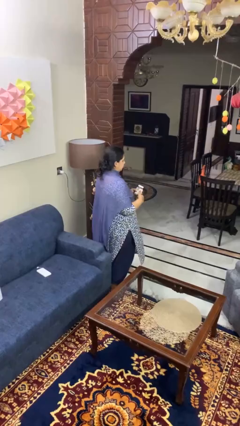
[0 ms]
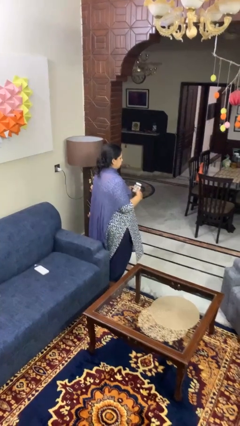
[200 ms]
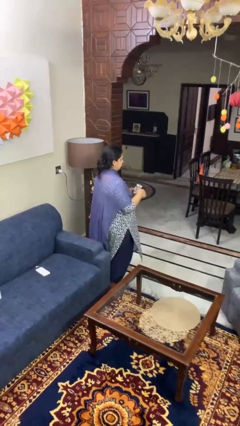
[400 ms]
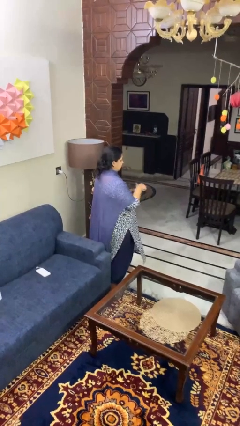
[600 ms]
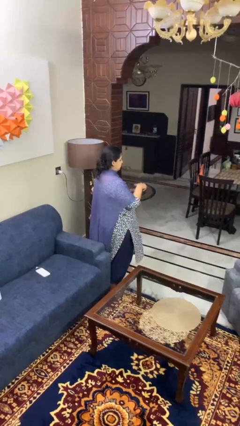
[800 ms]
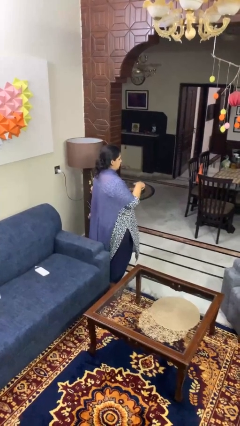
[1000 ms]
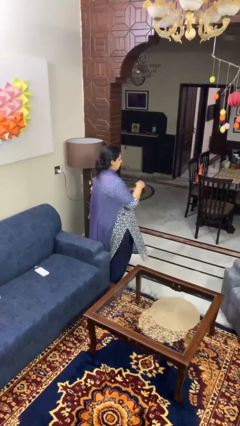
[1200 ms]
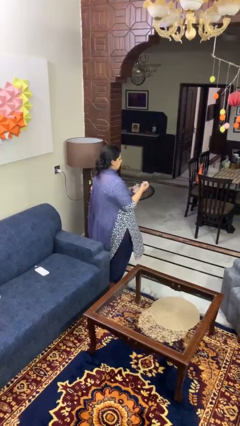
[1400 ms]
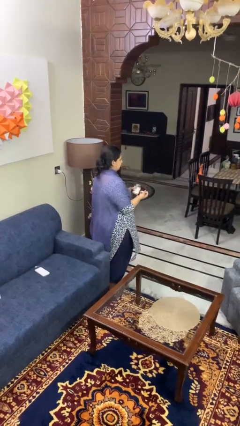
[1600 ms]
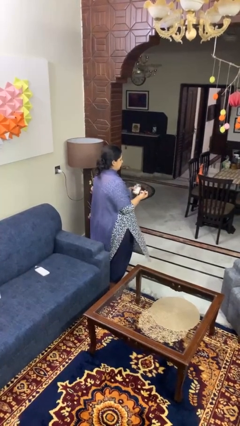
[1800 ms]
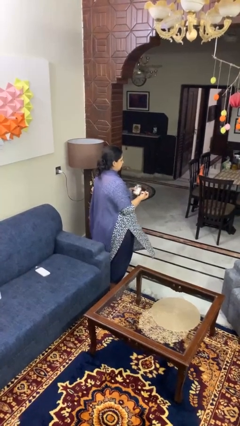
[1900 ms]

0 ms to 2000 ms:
person opens jar

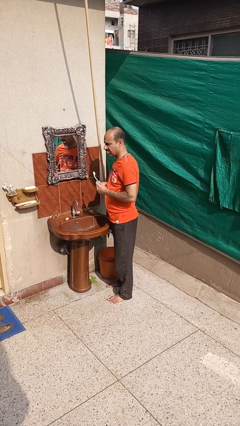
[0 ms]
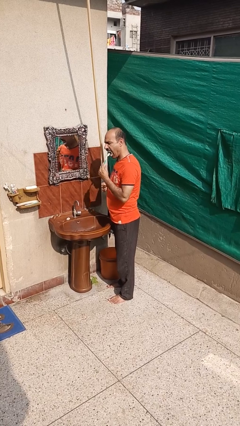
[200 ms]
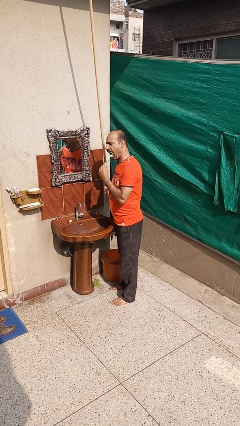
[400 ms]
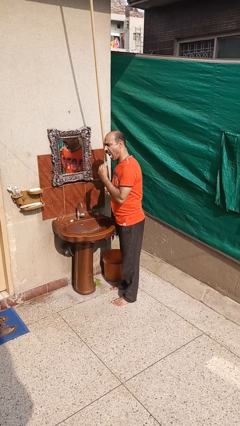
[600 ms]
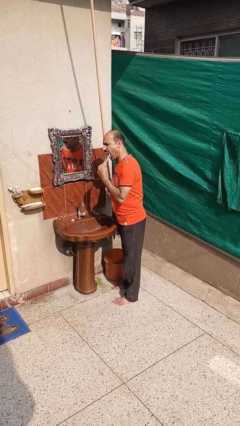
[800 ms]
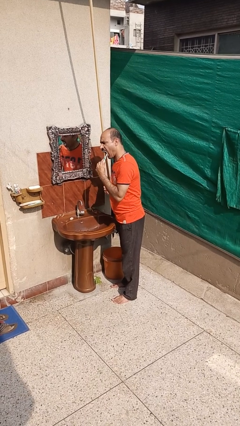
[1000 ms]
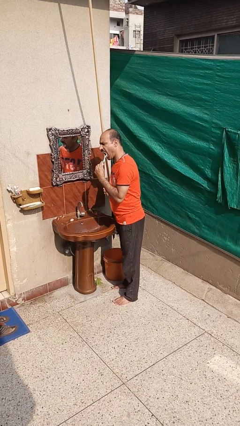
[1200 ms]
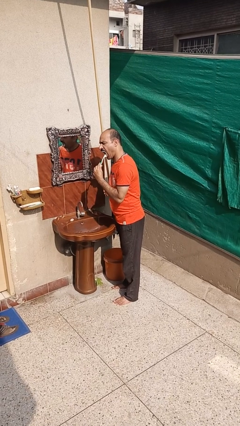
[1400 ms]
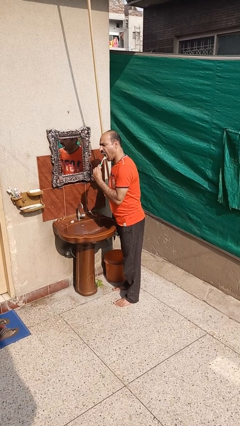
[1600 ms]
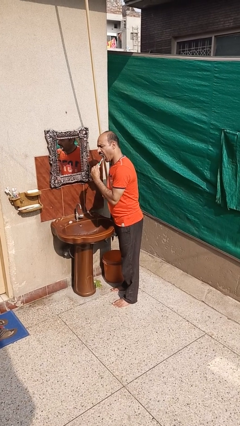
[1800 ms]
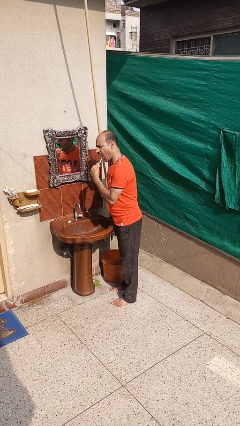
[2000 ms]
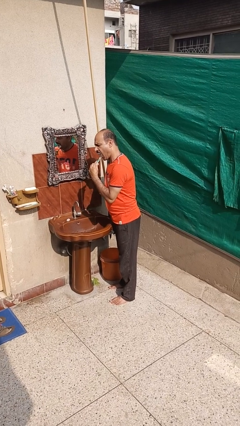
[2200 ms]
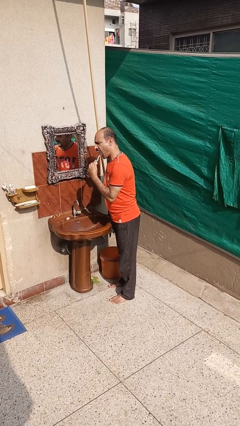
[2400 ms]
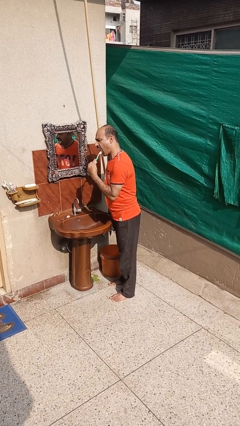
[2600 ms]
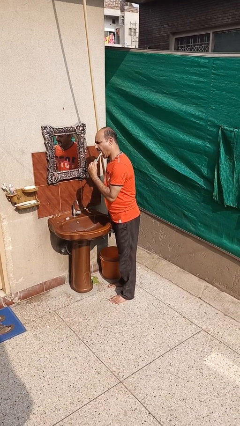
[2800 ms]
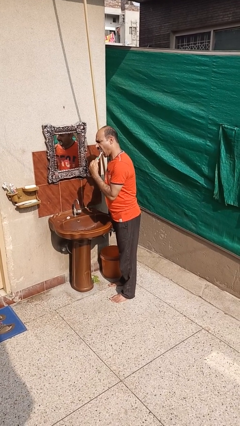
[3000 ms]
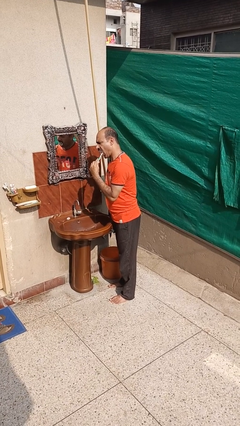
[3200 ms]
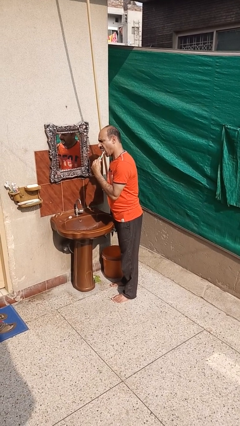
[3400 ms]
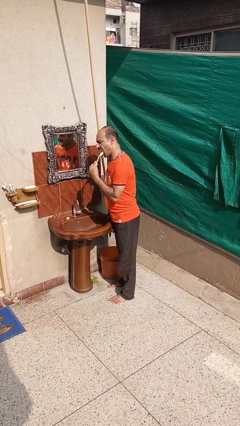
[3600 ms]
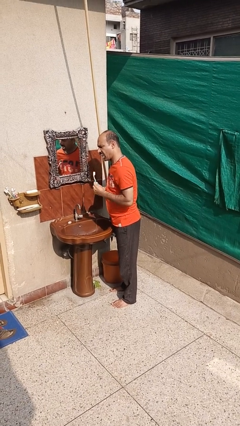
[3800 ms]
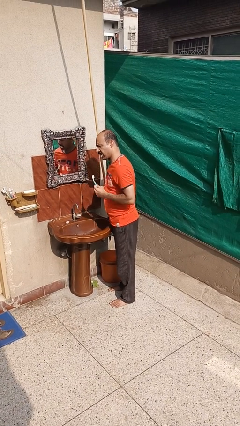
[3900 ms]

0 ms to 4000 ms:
person brushes teeth

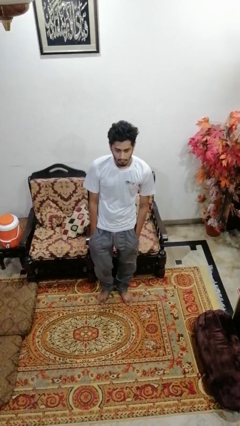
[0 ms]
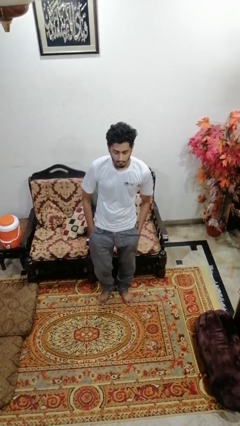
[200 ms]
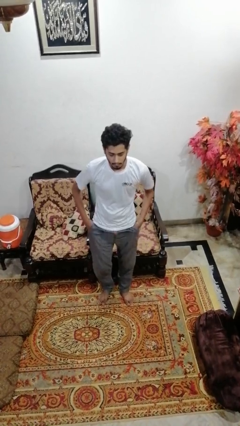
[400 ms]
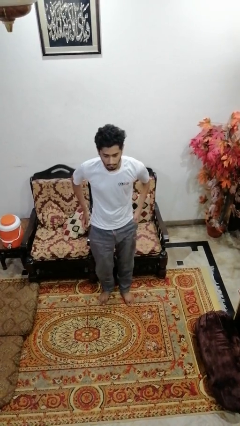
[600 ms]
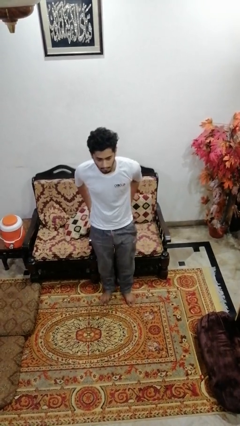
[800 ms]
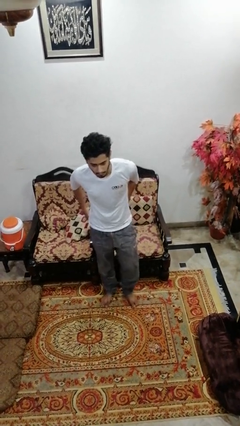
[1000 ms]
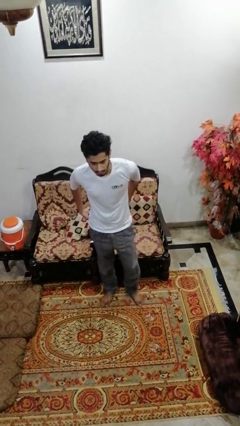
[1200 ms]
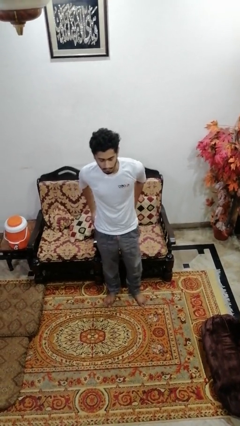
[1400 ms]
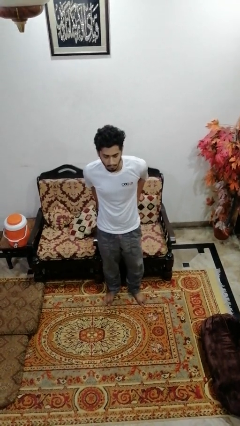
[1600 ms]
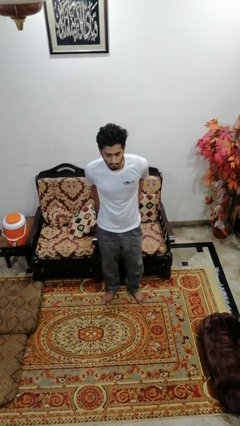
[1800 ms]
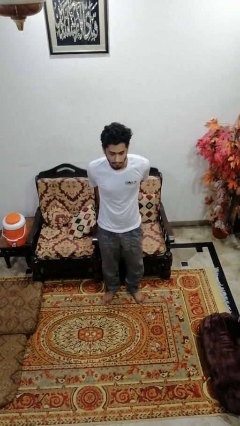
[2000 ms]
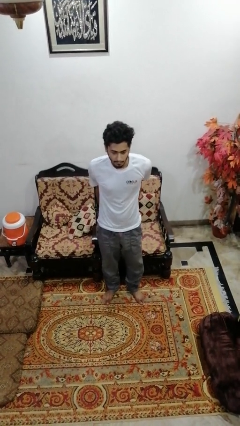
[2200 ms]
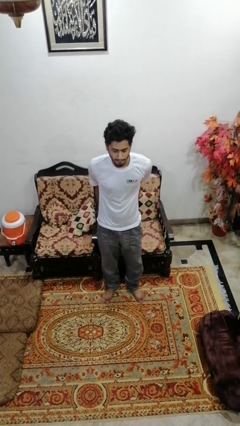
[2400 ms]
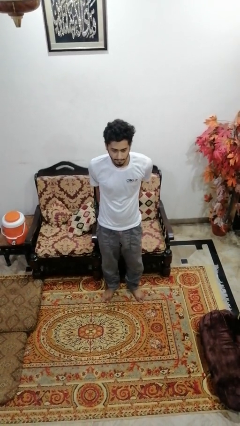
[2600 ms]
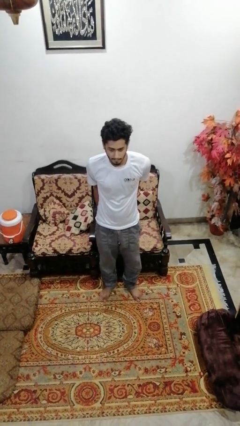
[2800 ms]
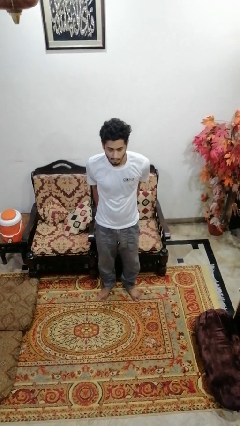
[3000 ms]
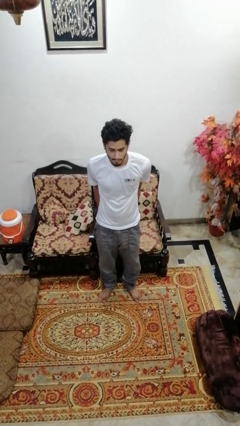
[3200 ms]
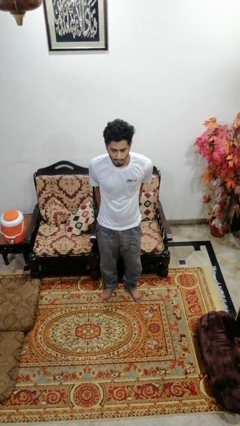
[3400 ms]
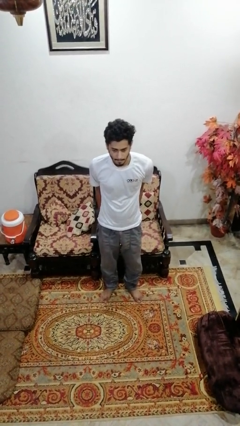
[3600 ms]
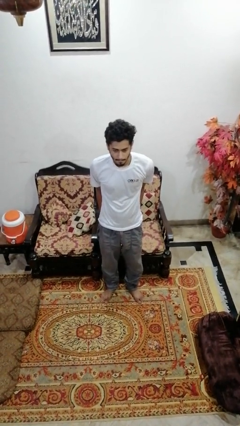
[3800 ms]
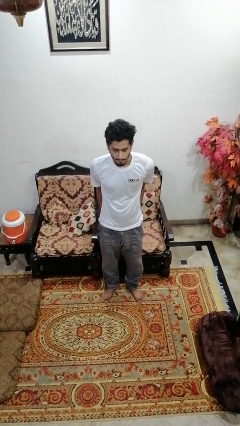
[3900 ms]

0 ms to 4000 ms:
person puts hands in back pockets

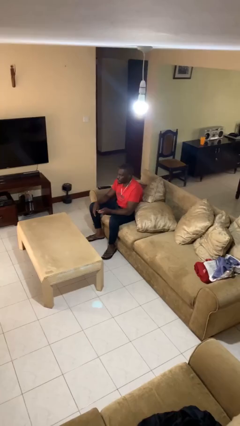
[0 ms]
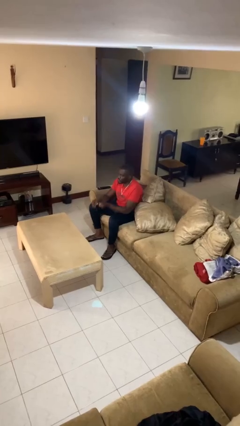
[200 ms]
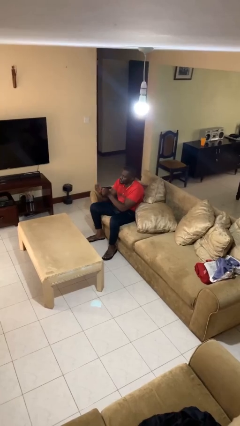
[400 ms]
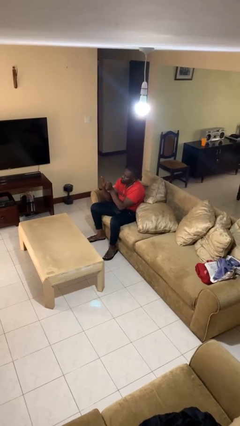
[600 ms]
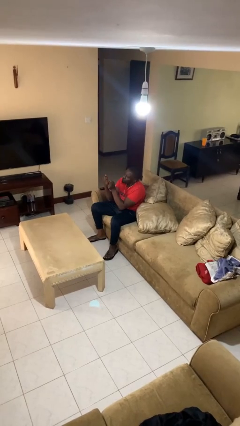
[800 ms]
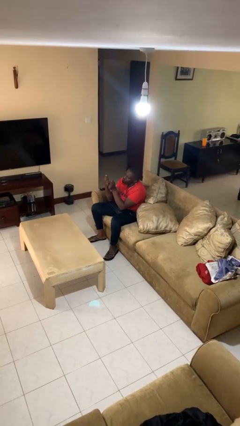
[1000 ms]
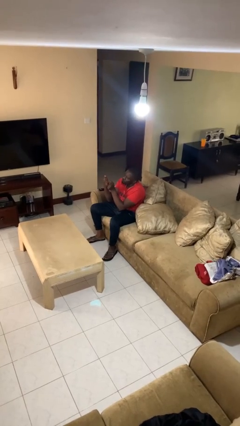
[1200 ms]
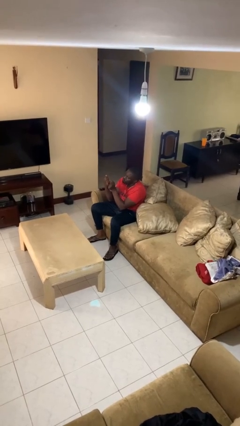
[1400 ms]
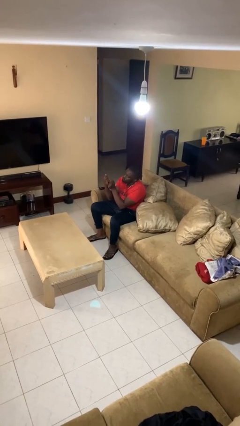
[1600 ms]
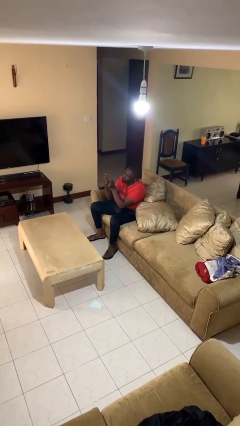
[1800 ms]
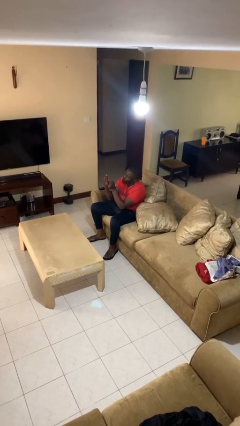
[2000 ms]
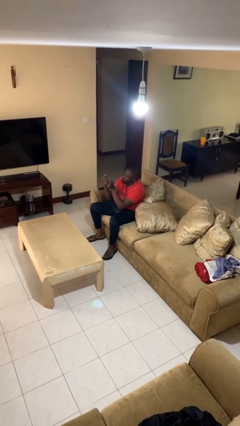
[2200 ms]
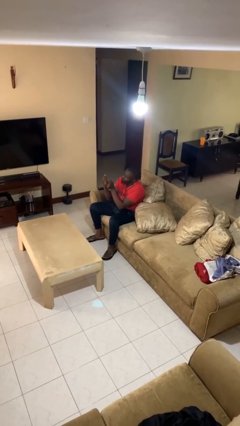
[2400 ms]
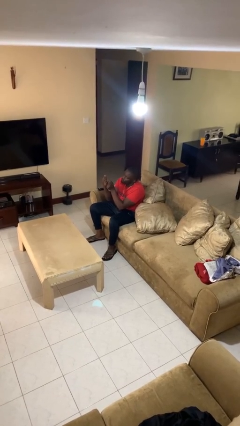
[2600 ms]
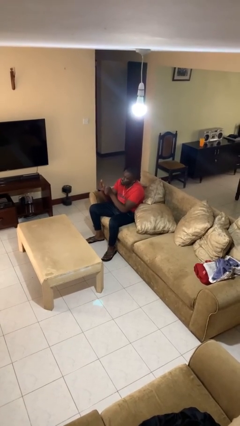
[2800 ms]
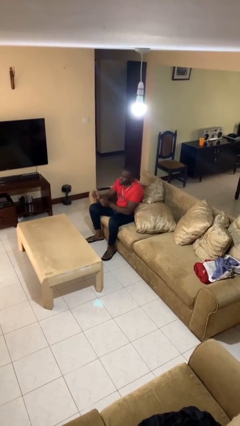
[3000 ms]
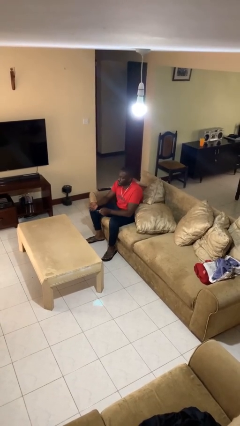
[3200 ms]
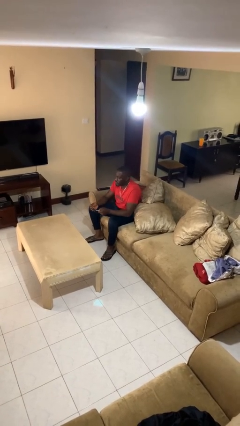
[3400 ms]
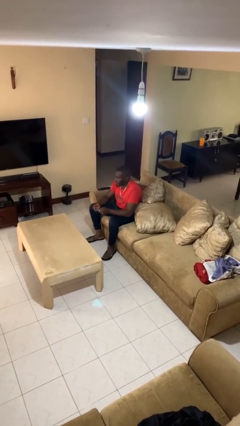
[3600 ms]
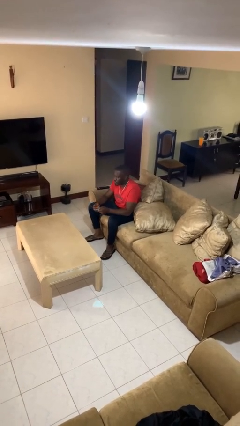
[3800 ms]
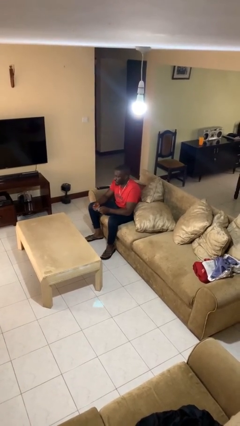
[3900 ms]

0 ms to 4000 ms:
person clips fingernails

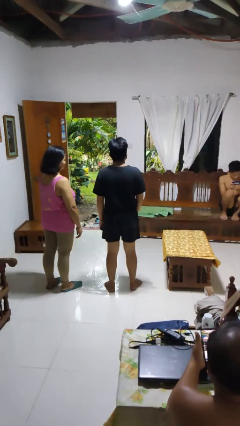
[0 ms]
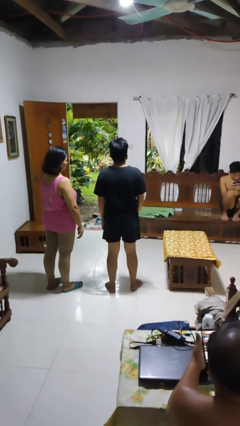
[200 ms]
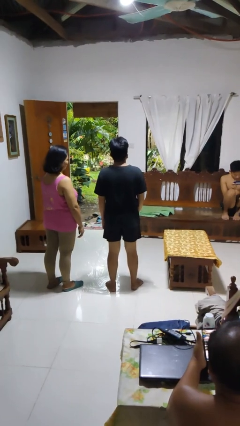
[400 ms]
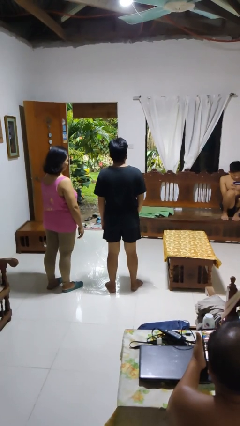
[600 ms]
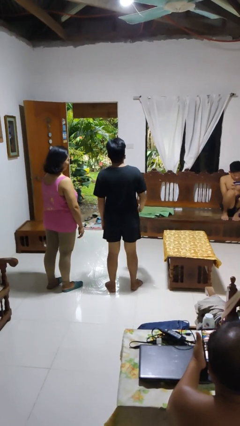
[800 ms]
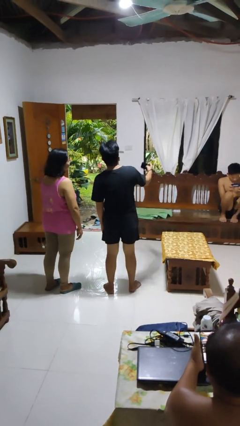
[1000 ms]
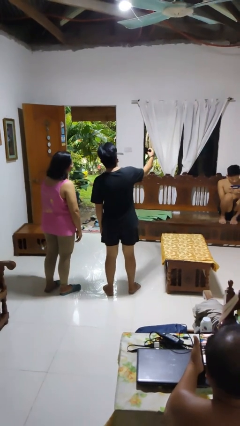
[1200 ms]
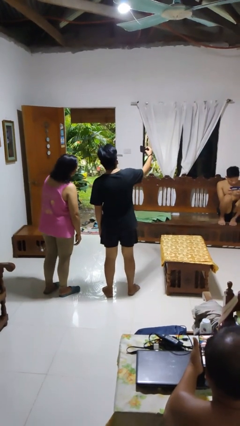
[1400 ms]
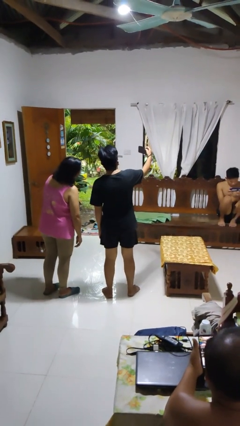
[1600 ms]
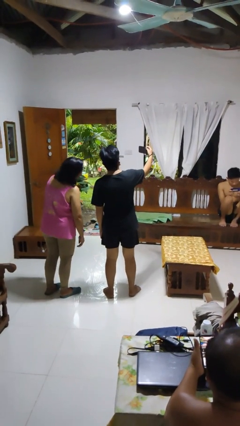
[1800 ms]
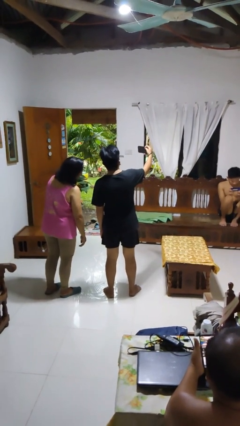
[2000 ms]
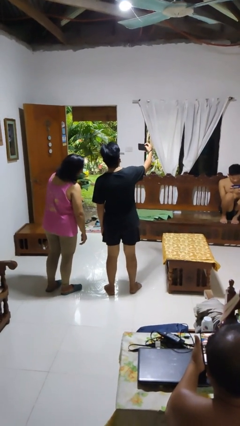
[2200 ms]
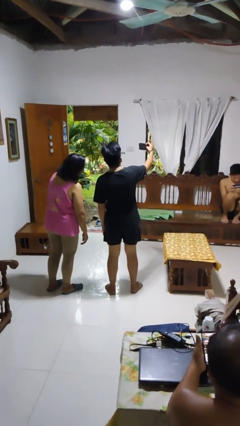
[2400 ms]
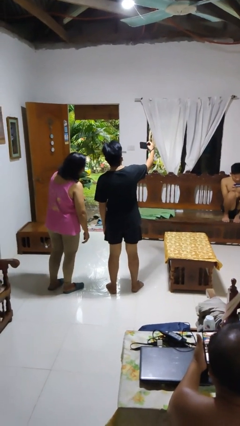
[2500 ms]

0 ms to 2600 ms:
person takes selfie with person

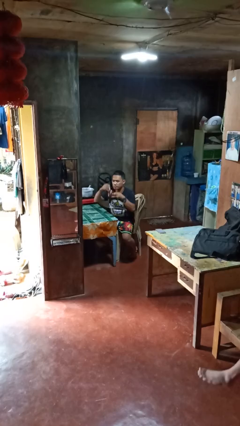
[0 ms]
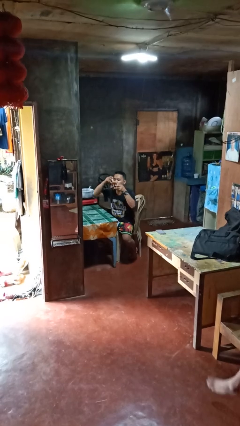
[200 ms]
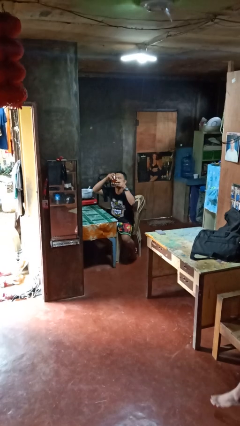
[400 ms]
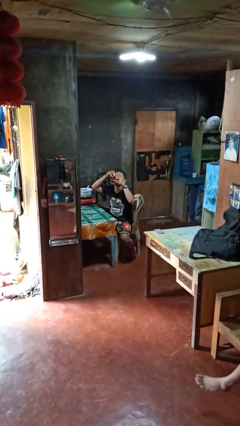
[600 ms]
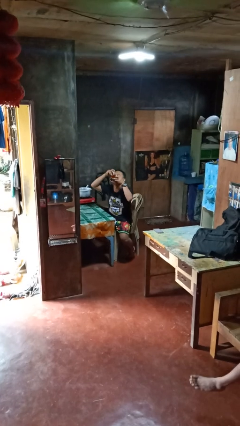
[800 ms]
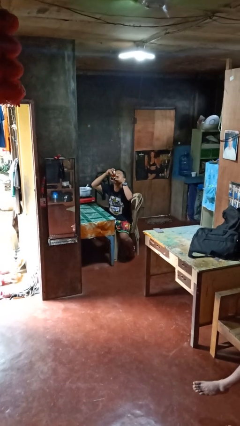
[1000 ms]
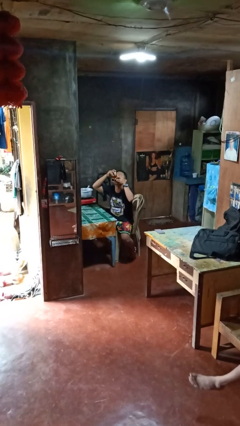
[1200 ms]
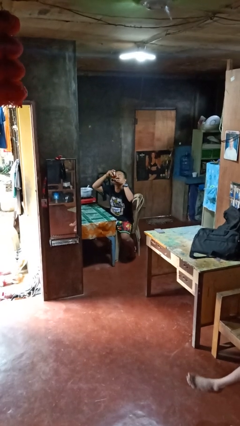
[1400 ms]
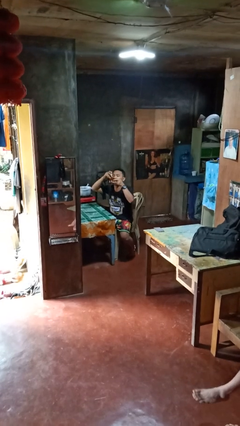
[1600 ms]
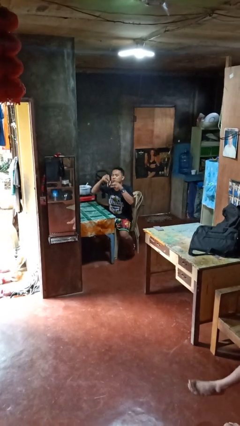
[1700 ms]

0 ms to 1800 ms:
person drinks from mug
